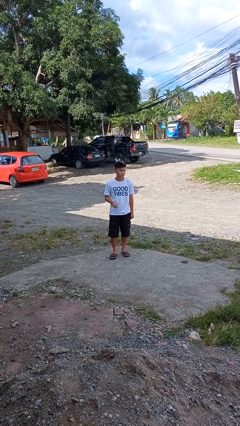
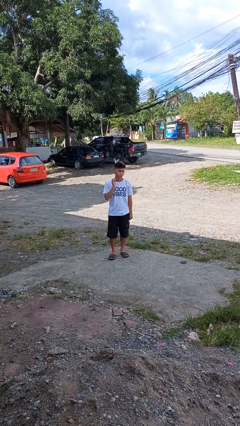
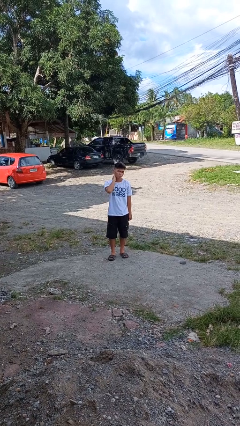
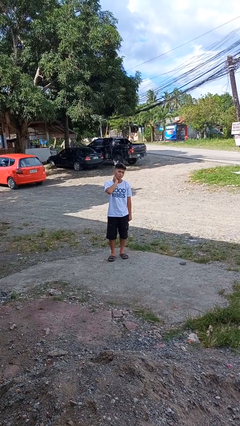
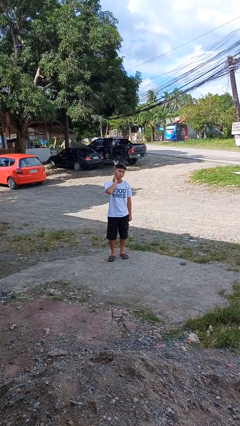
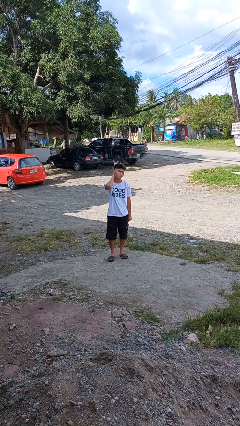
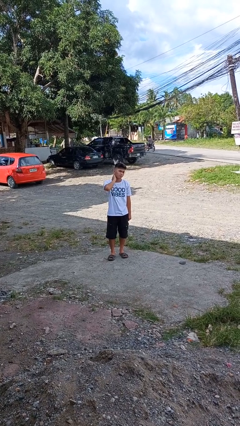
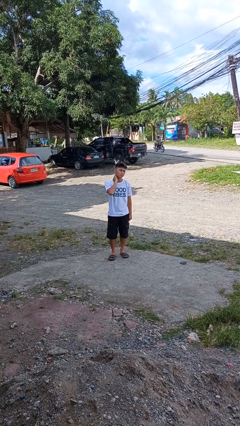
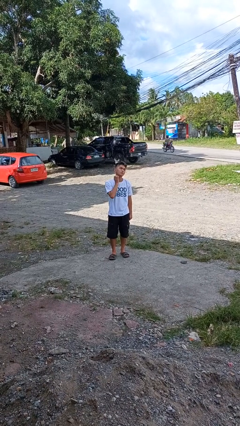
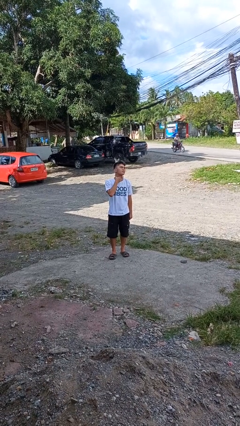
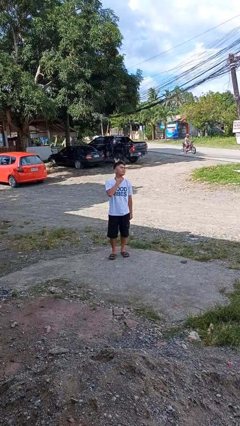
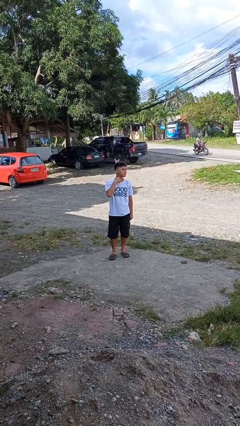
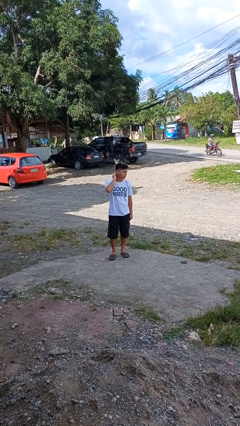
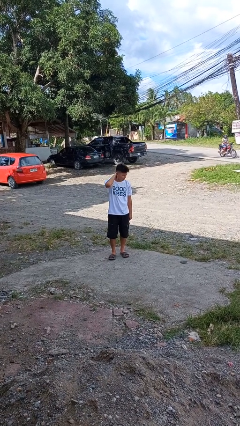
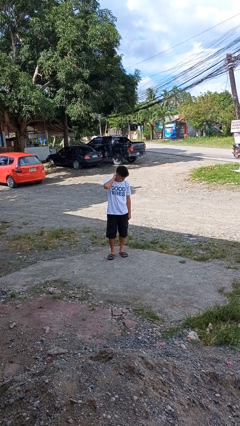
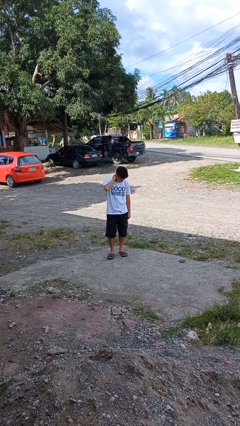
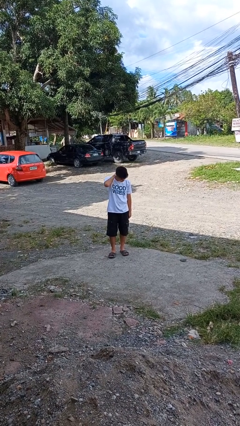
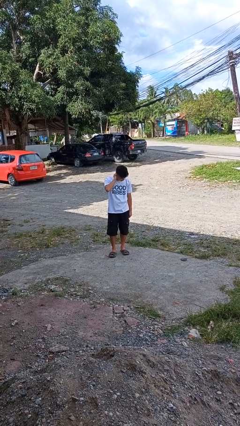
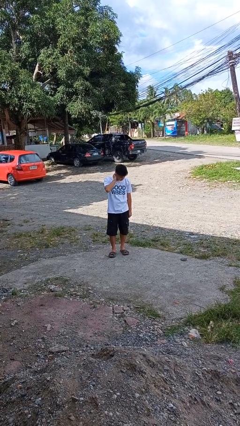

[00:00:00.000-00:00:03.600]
person rubs neck

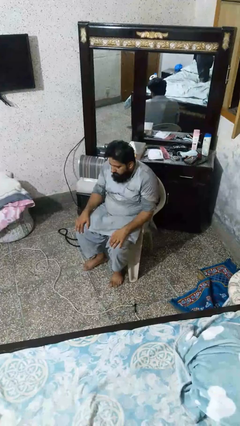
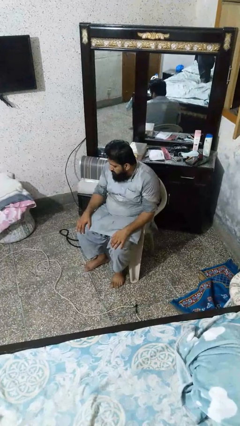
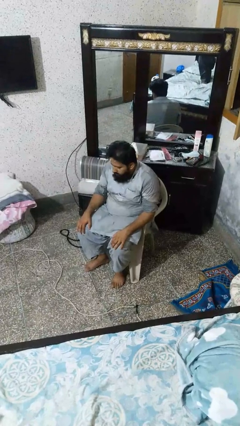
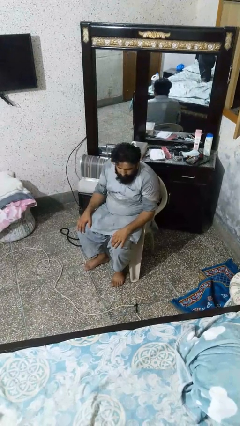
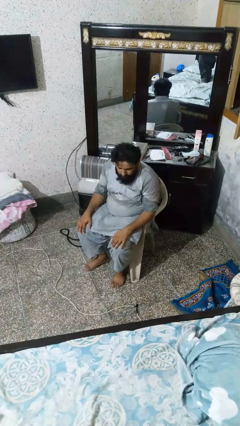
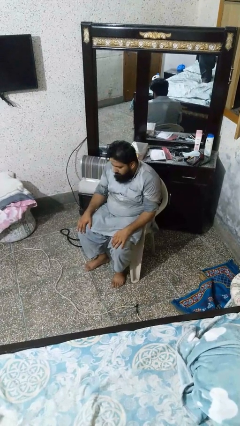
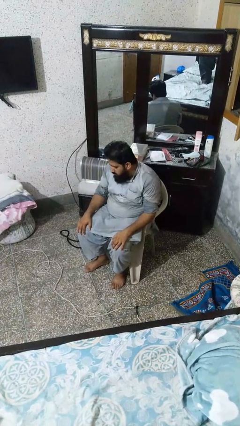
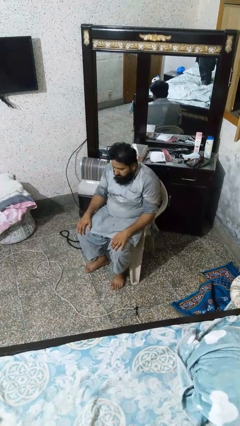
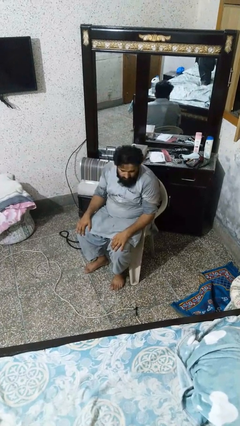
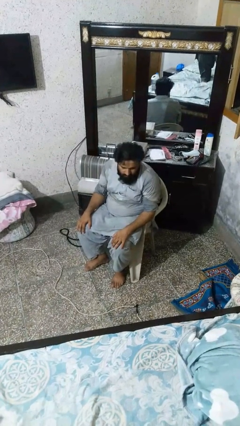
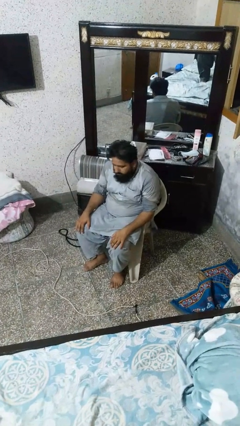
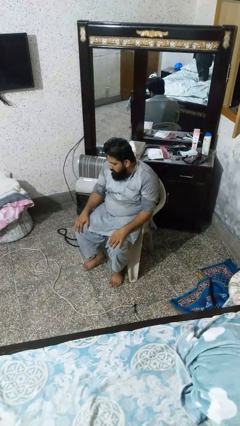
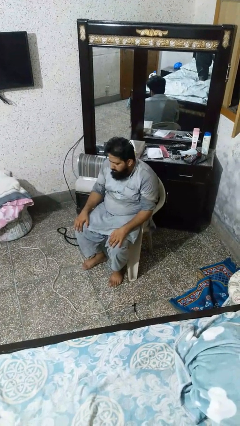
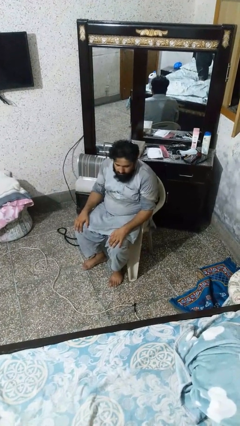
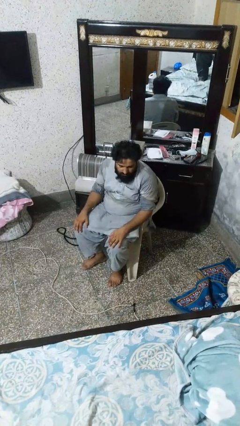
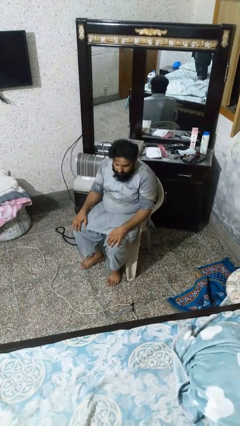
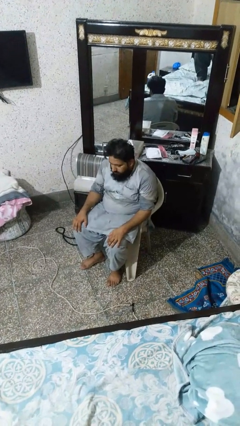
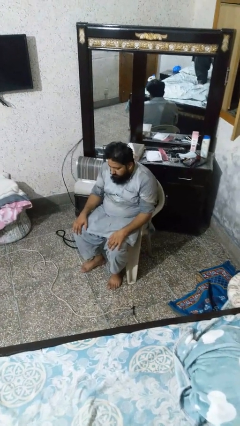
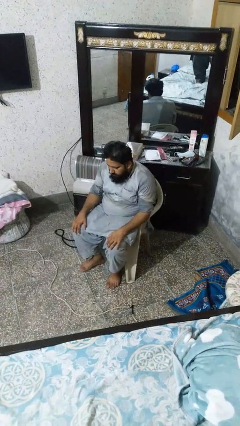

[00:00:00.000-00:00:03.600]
person shakes head

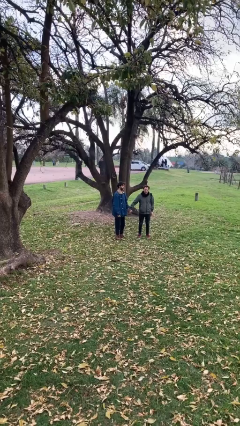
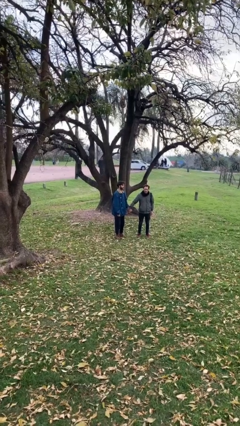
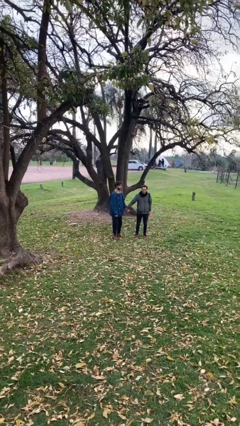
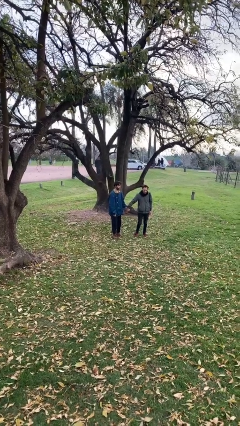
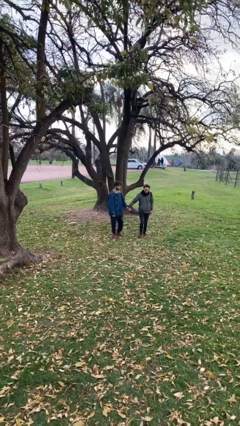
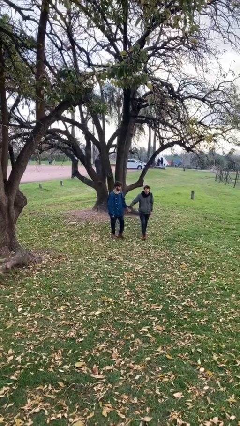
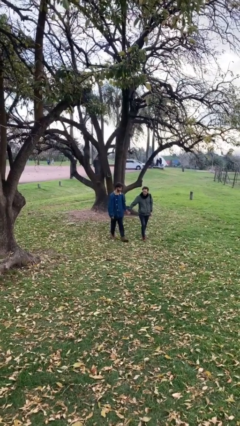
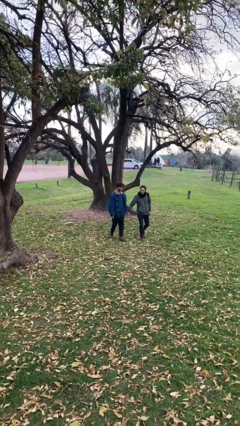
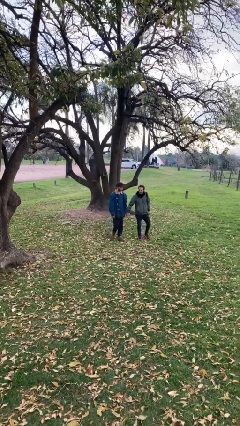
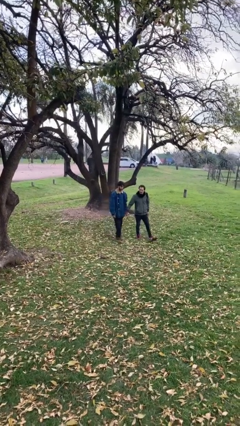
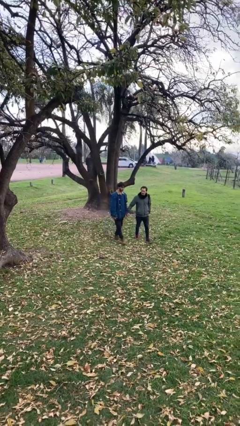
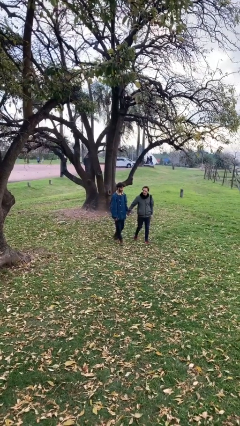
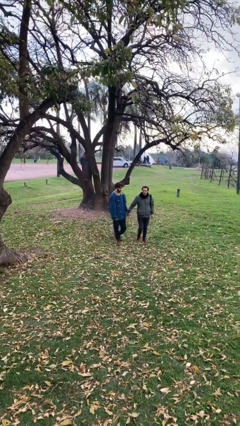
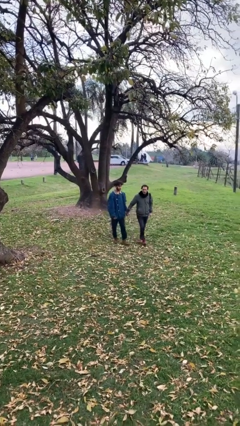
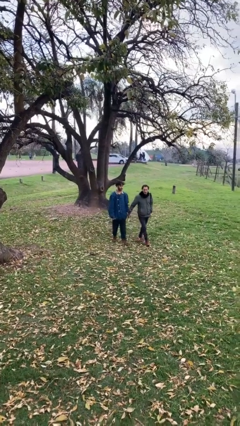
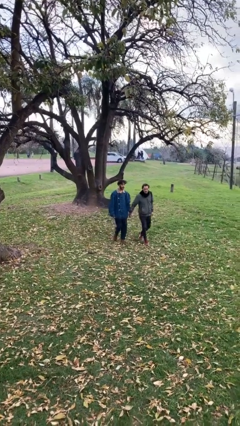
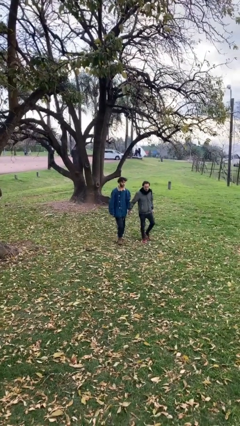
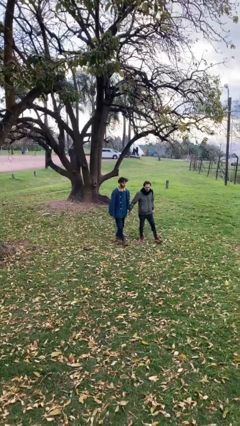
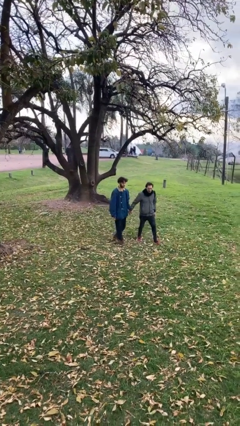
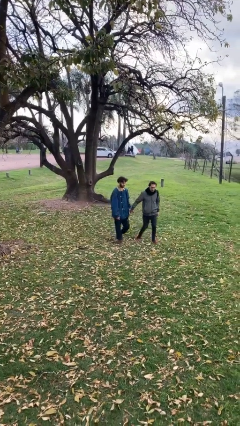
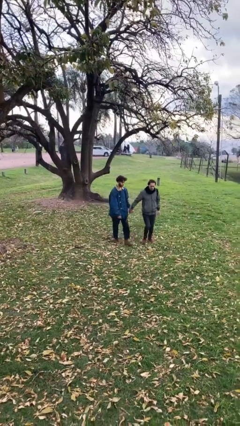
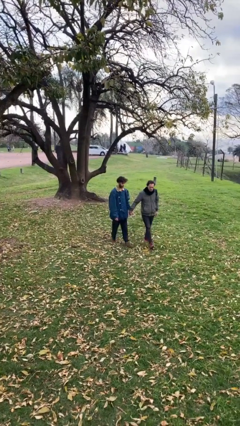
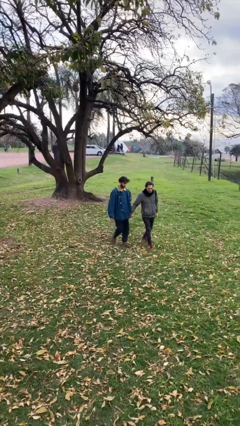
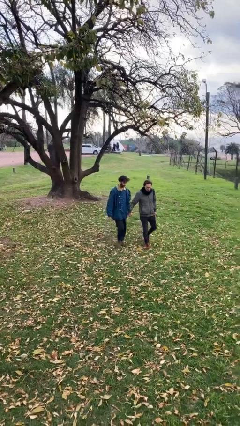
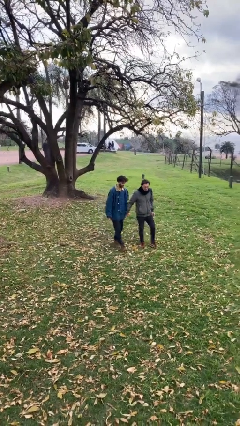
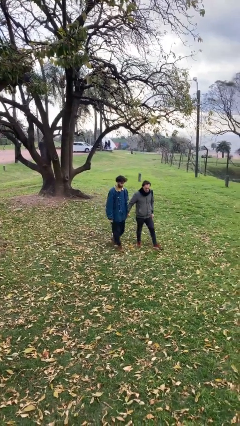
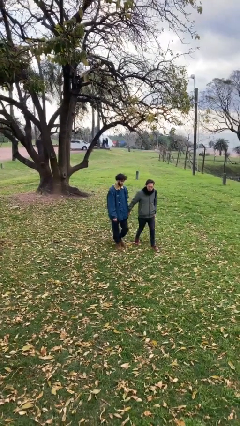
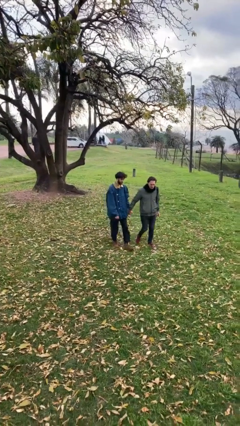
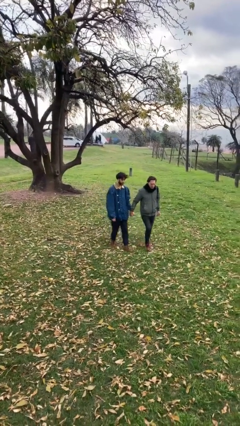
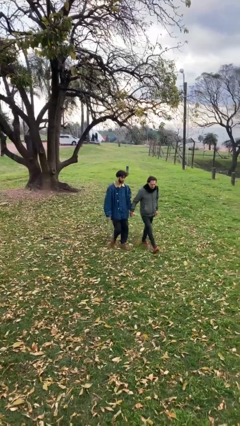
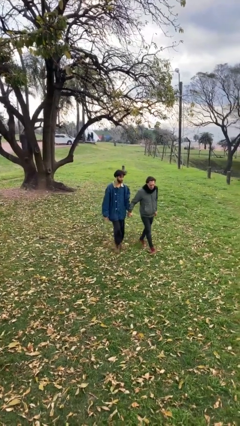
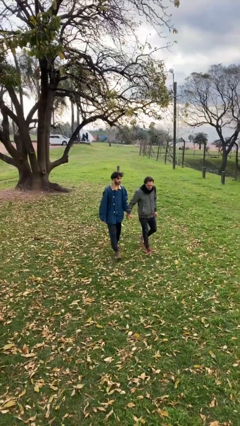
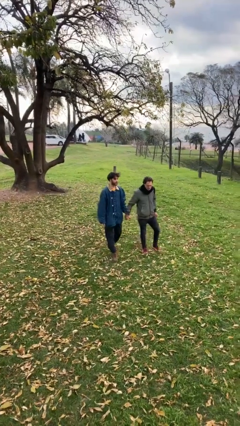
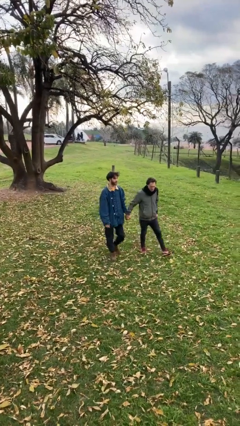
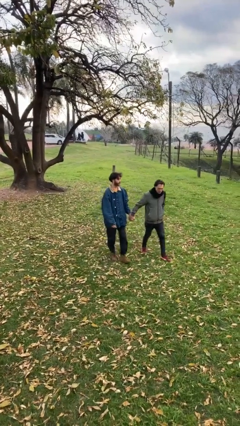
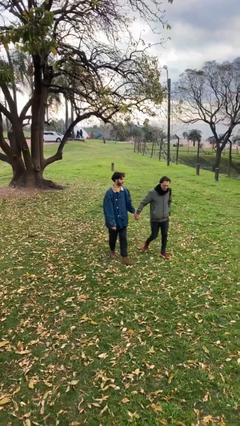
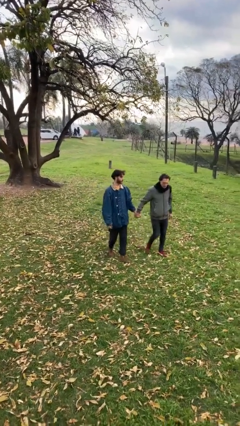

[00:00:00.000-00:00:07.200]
person holds hand

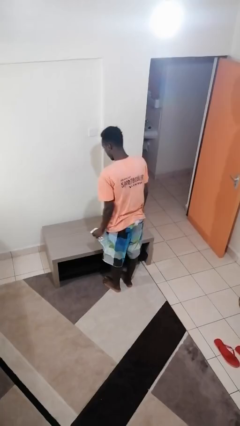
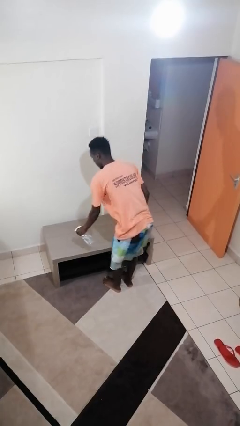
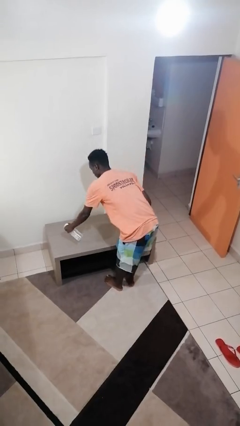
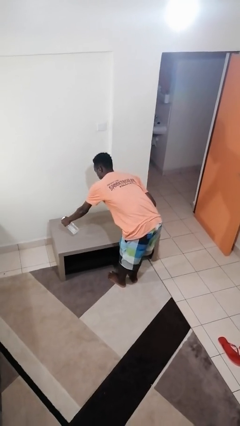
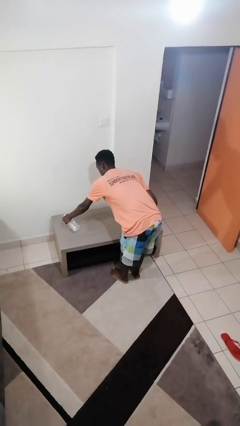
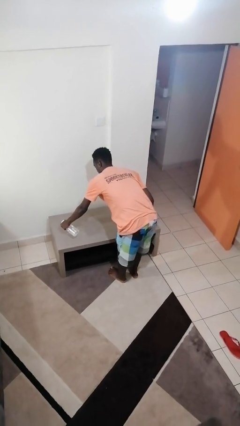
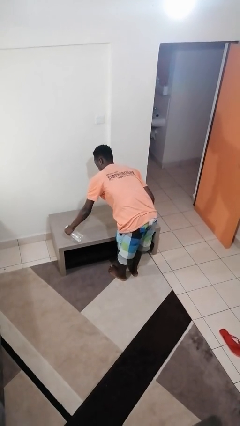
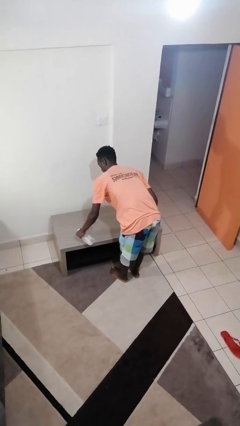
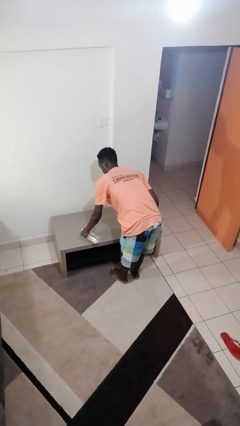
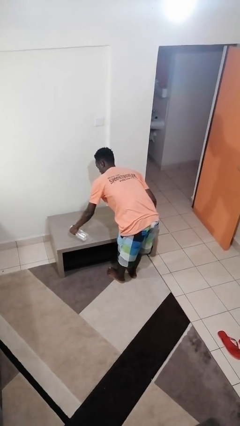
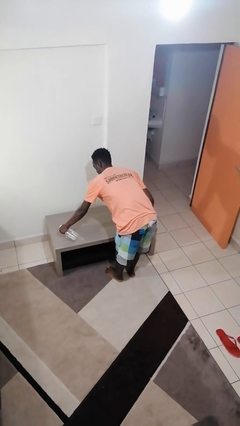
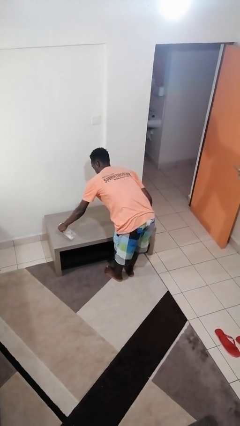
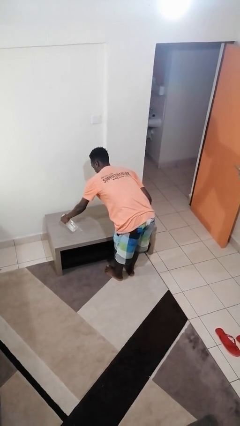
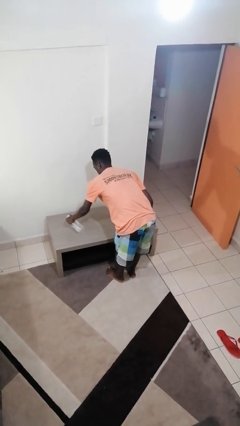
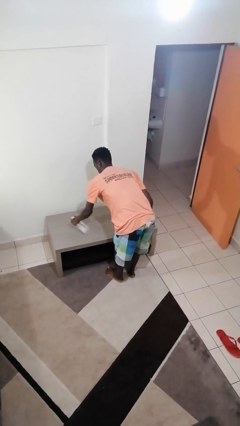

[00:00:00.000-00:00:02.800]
person sprays from bottle

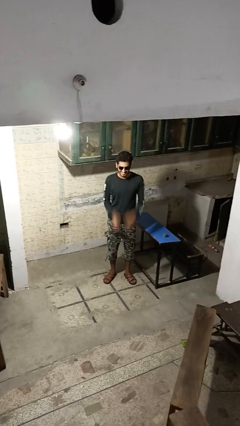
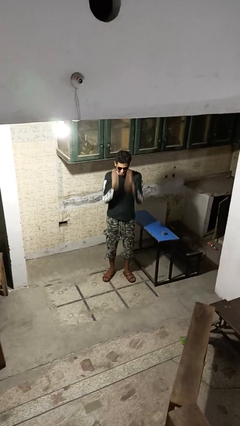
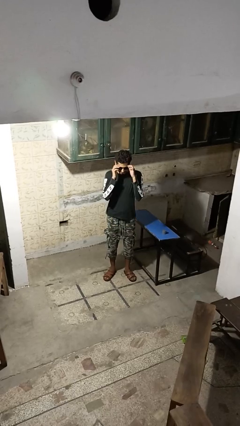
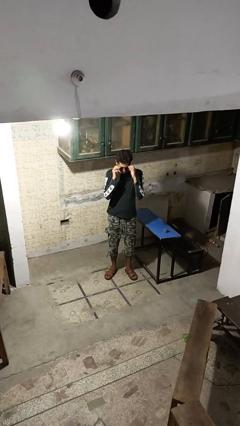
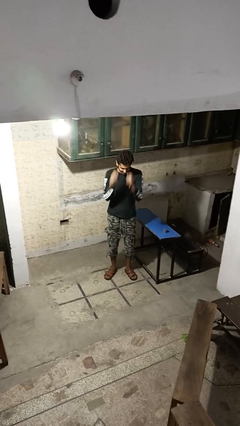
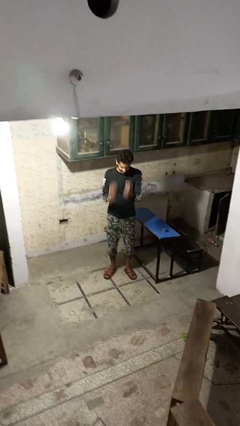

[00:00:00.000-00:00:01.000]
person takes off sunglasses
